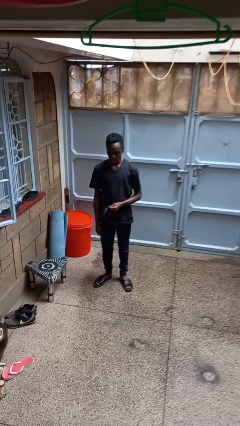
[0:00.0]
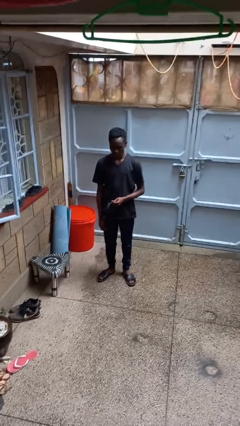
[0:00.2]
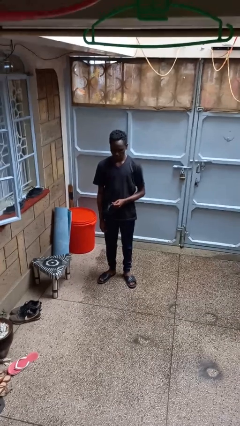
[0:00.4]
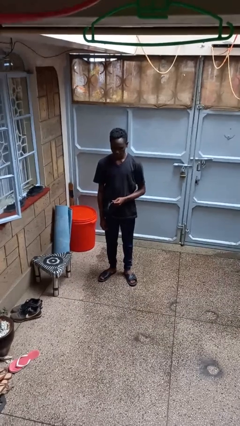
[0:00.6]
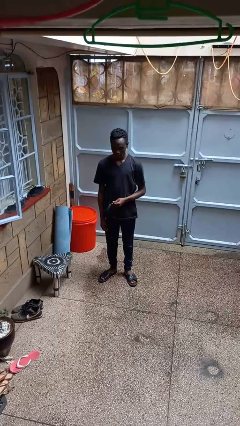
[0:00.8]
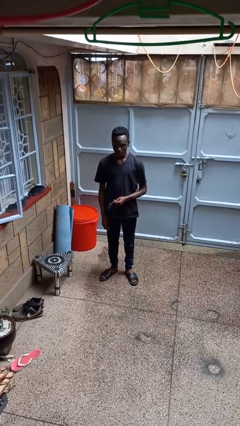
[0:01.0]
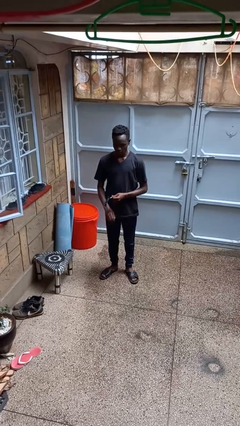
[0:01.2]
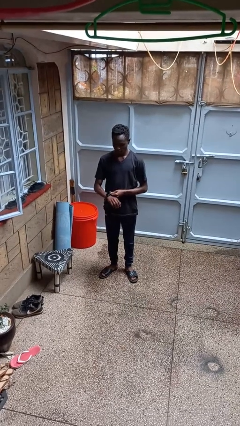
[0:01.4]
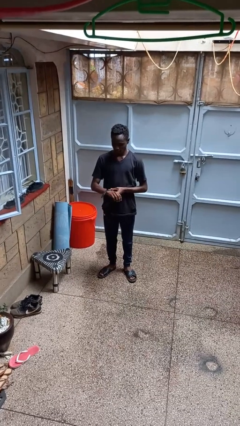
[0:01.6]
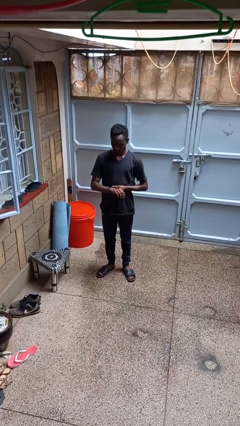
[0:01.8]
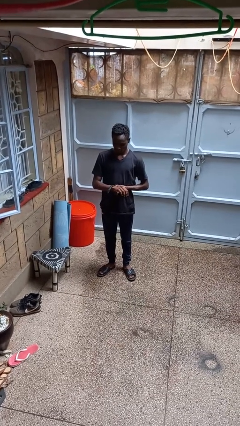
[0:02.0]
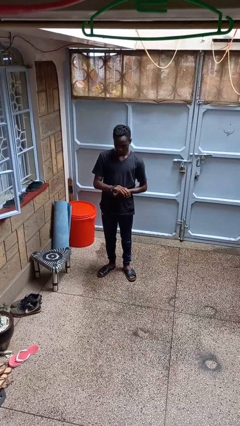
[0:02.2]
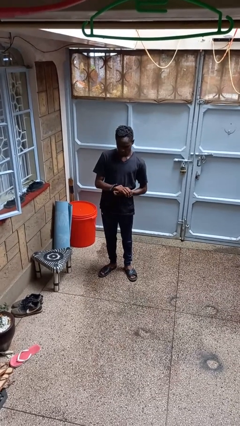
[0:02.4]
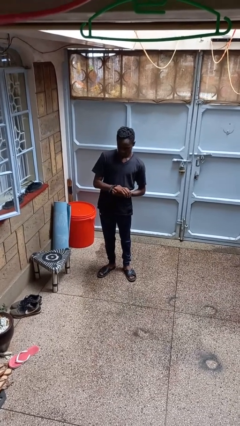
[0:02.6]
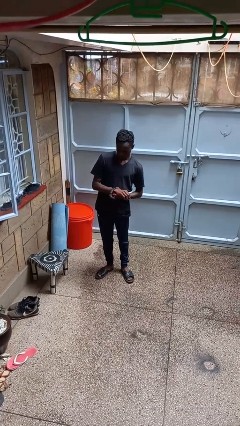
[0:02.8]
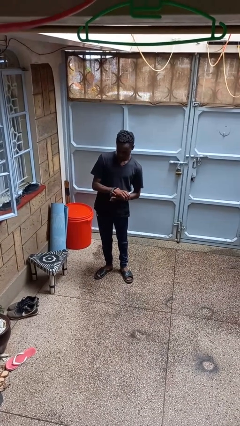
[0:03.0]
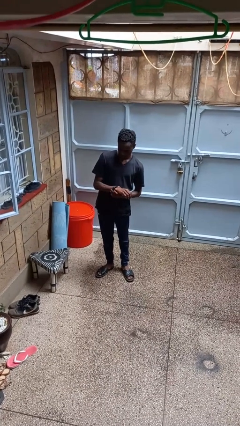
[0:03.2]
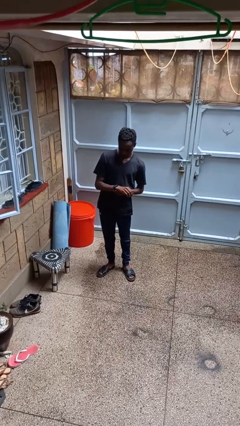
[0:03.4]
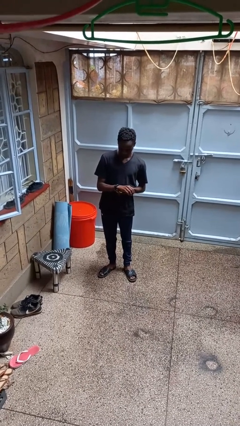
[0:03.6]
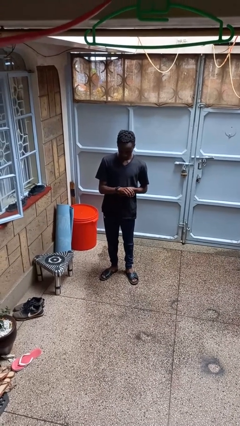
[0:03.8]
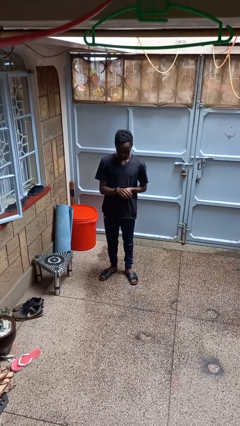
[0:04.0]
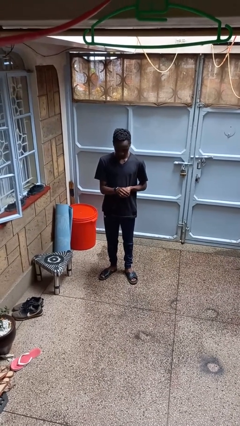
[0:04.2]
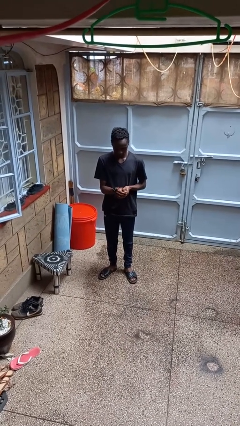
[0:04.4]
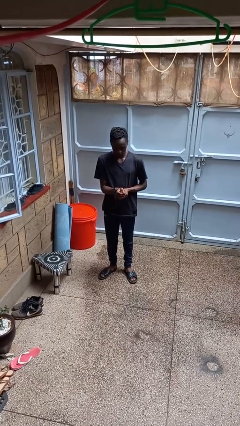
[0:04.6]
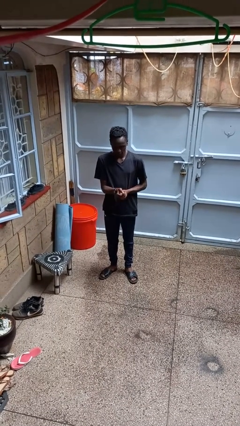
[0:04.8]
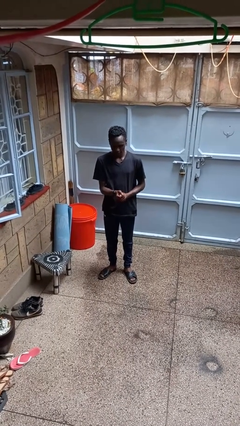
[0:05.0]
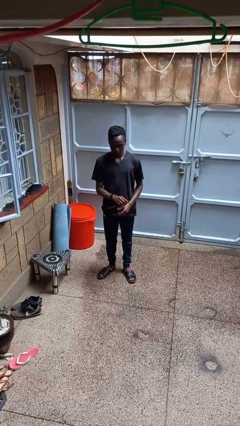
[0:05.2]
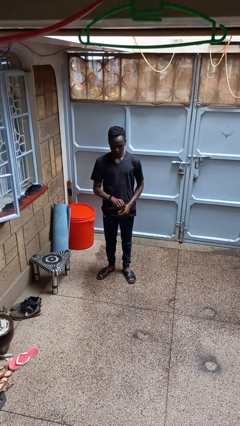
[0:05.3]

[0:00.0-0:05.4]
person puts on wristwatch

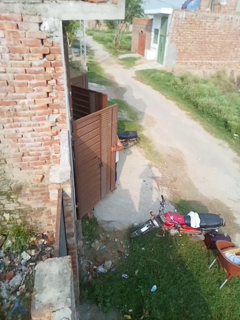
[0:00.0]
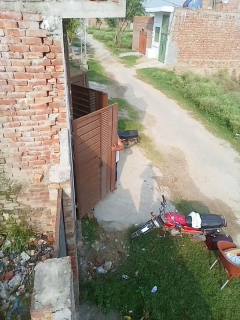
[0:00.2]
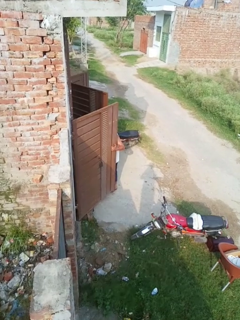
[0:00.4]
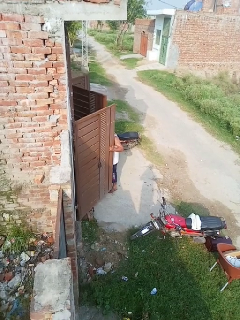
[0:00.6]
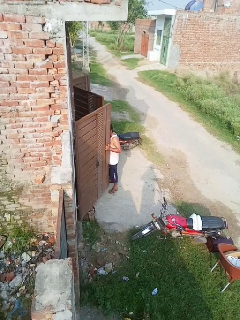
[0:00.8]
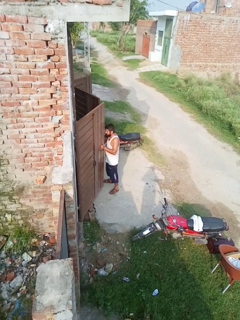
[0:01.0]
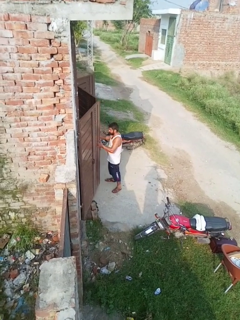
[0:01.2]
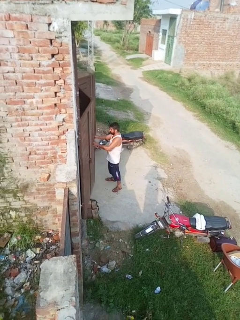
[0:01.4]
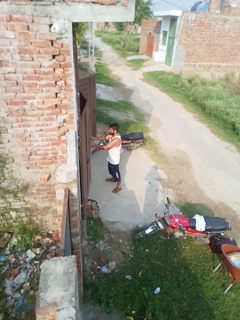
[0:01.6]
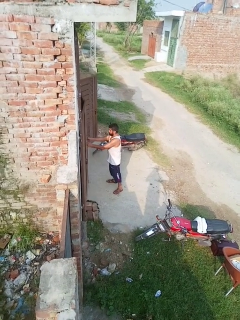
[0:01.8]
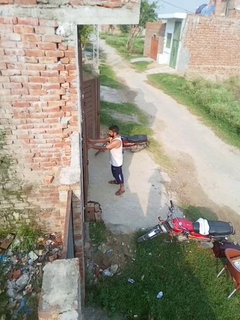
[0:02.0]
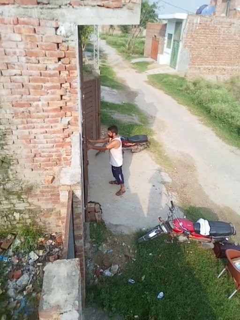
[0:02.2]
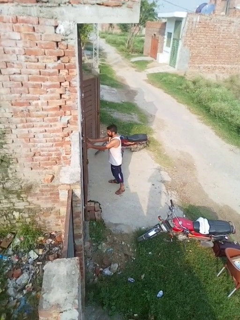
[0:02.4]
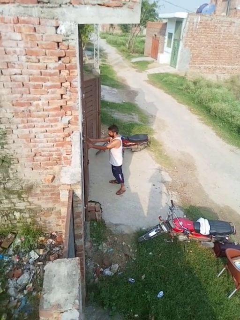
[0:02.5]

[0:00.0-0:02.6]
person closes gate

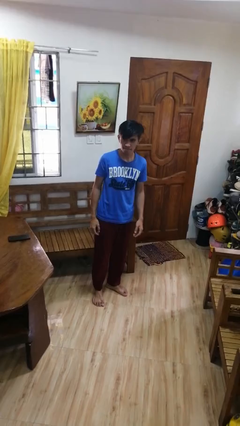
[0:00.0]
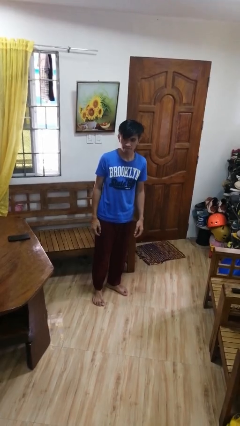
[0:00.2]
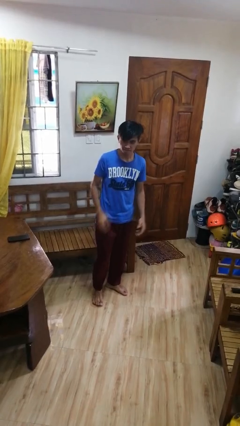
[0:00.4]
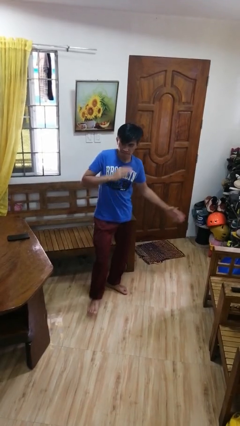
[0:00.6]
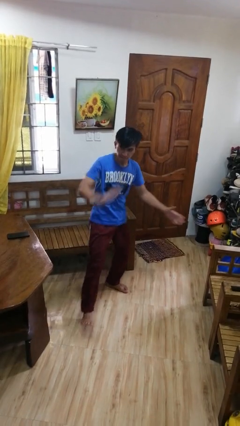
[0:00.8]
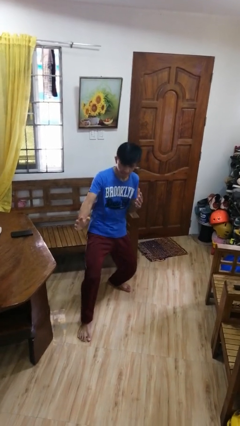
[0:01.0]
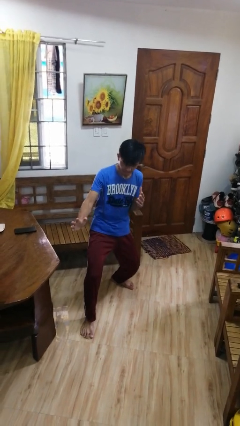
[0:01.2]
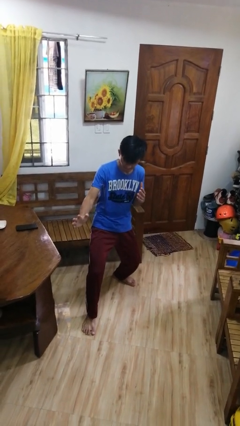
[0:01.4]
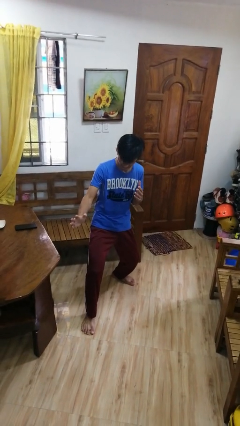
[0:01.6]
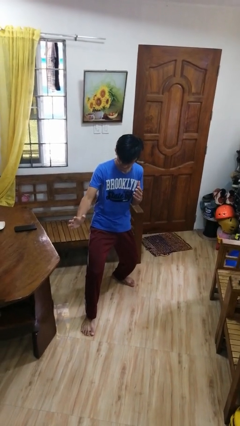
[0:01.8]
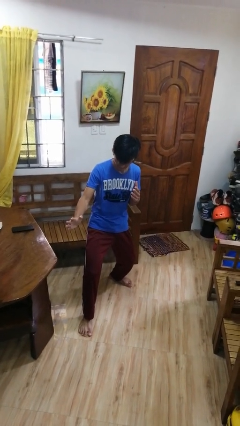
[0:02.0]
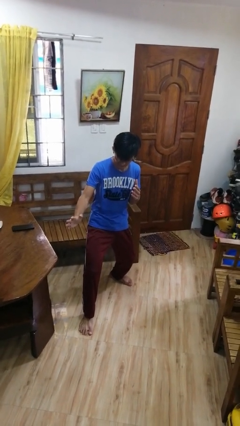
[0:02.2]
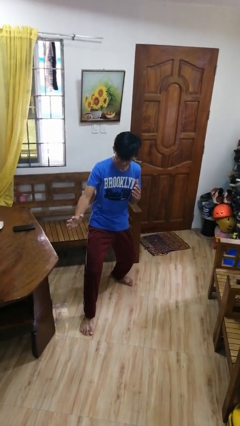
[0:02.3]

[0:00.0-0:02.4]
person karate chop

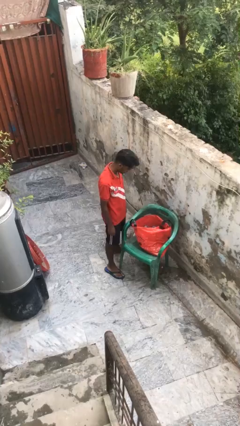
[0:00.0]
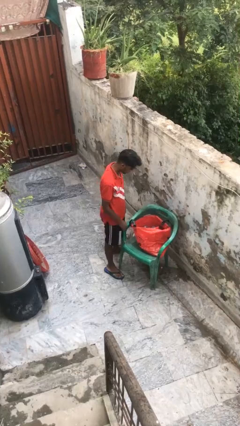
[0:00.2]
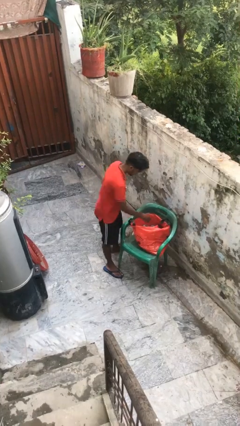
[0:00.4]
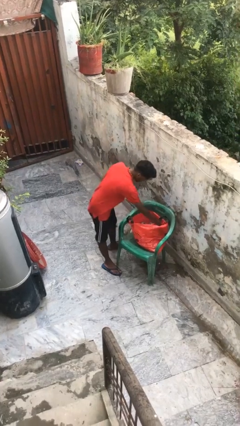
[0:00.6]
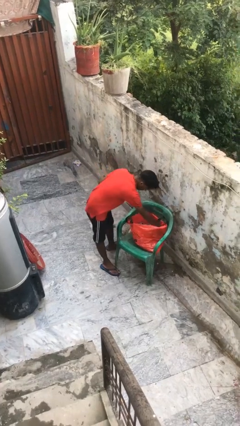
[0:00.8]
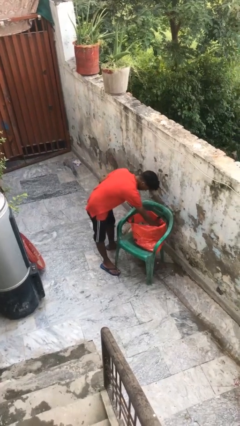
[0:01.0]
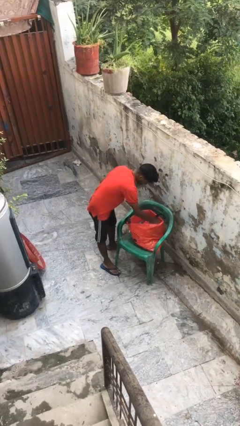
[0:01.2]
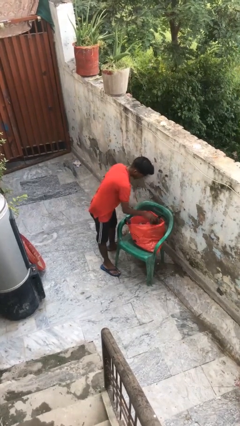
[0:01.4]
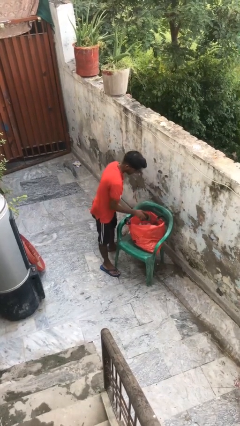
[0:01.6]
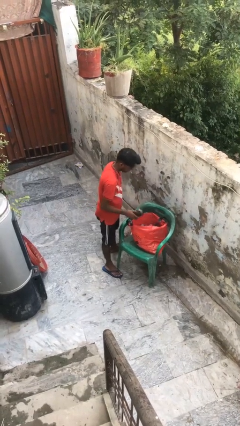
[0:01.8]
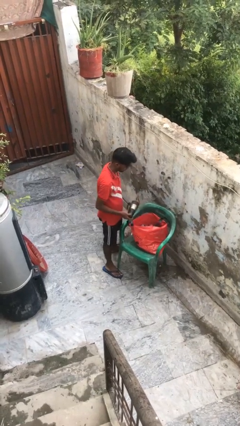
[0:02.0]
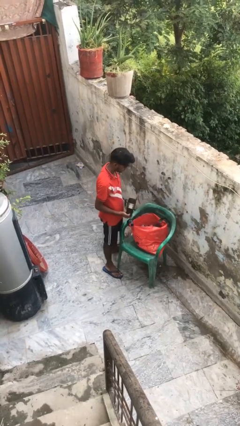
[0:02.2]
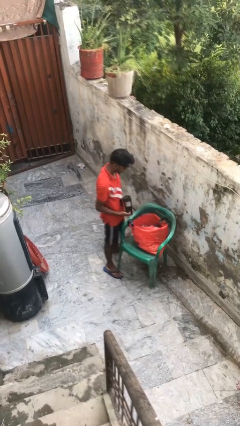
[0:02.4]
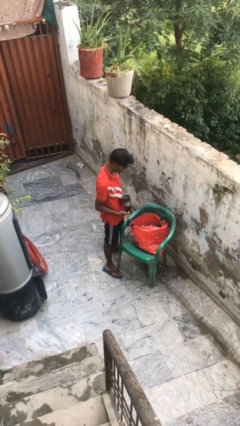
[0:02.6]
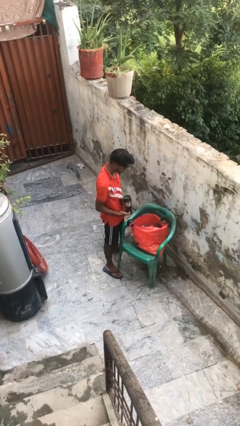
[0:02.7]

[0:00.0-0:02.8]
person takes object from bag

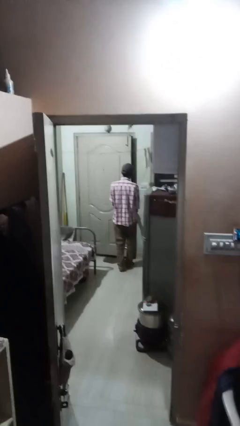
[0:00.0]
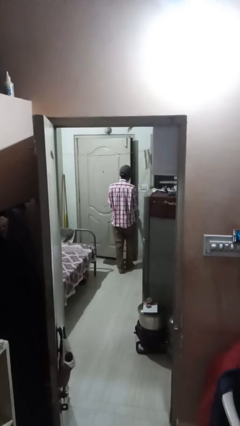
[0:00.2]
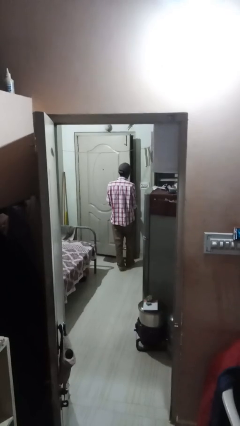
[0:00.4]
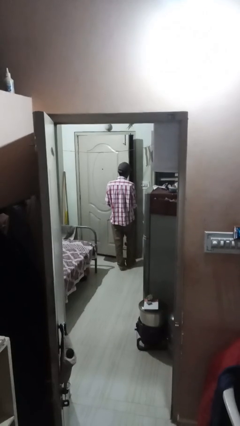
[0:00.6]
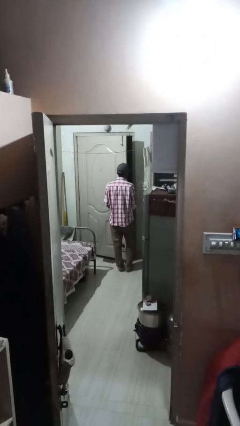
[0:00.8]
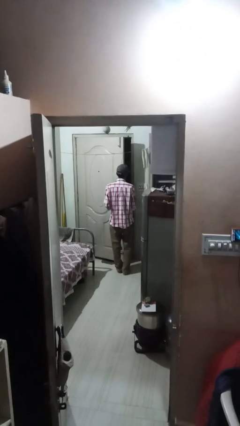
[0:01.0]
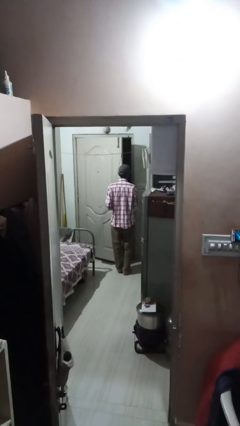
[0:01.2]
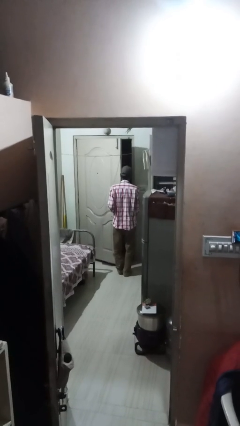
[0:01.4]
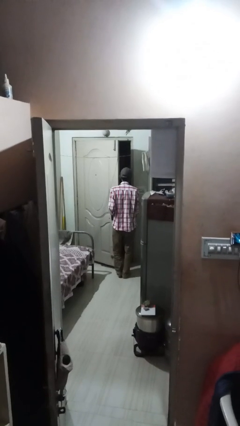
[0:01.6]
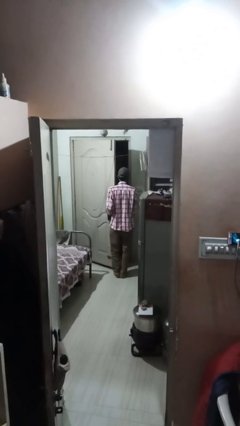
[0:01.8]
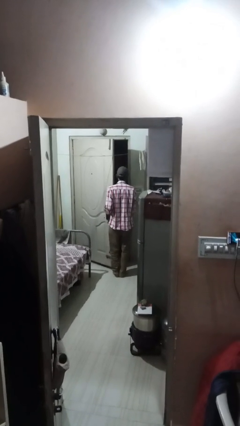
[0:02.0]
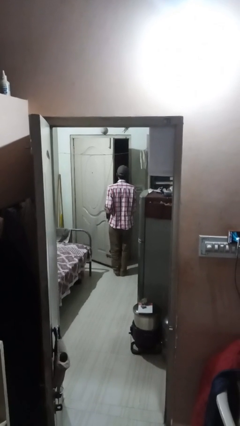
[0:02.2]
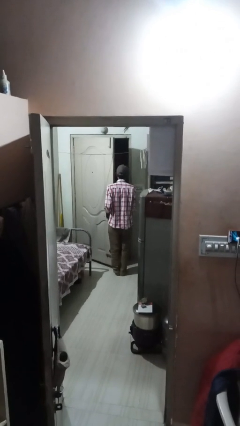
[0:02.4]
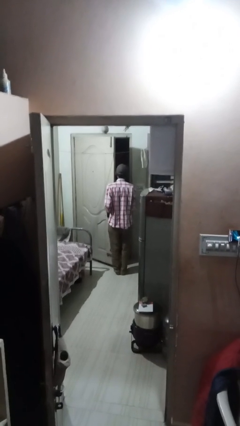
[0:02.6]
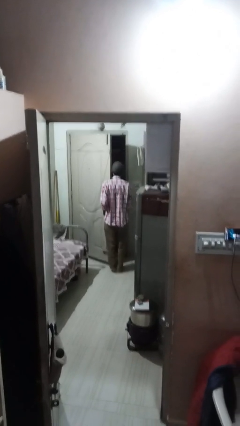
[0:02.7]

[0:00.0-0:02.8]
person opens facility door

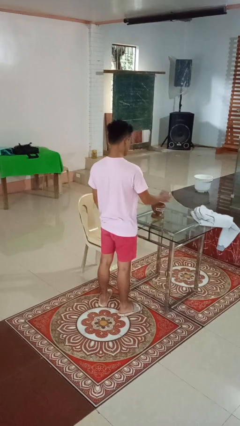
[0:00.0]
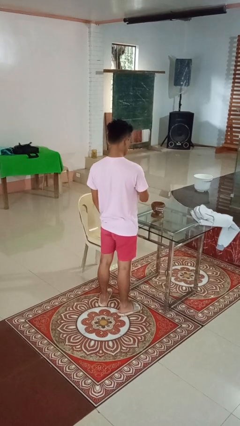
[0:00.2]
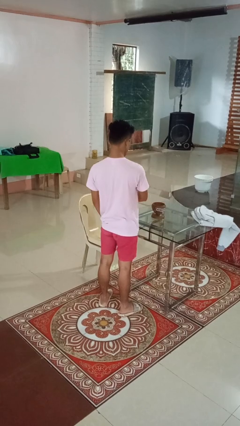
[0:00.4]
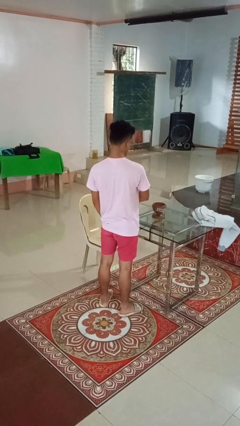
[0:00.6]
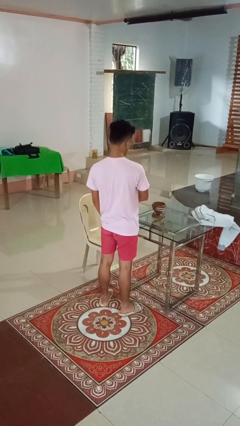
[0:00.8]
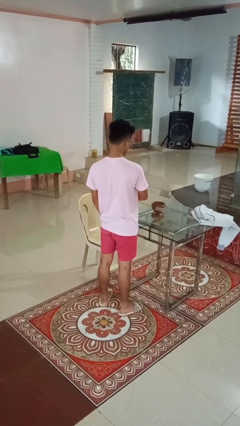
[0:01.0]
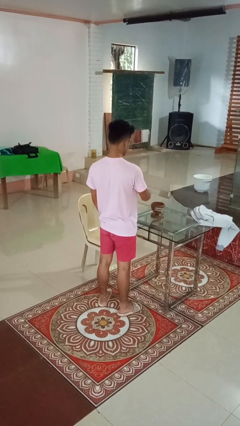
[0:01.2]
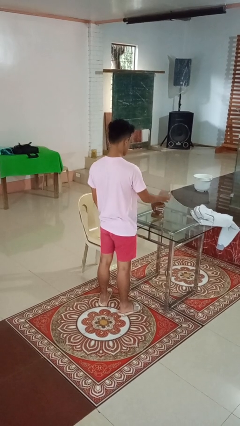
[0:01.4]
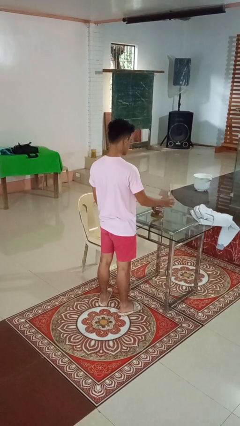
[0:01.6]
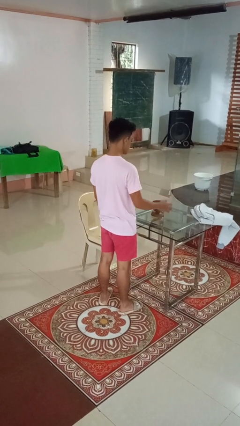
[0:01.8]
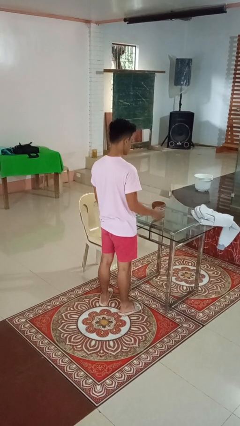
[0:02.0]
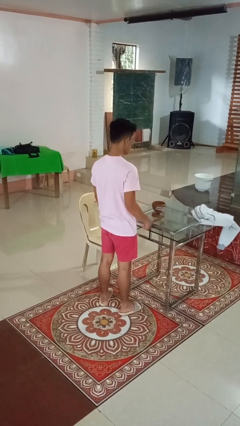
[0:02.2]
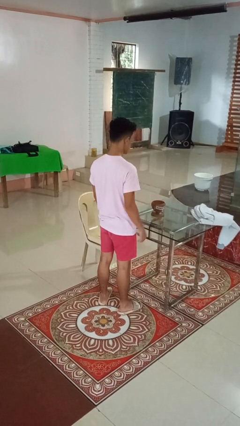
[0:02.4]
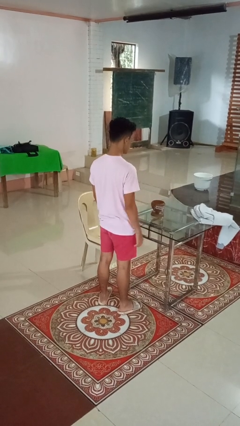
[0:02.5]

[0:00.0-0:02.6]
person waves hand over object
